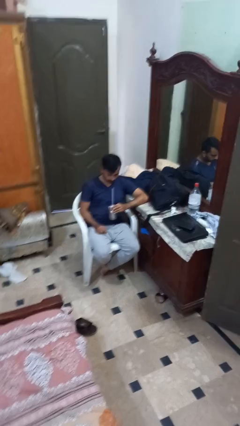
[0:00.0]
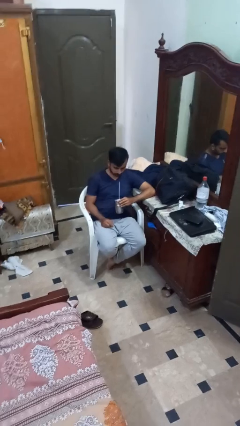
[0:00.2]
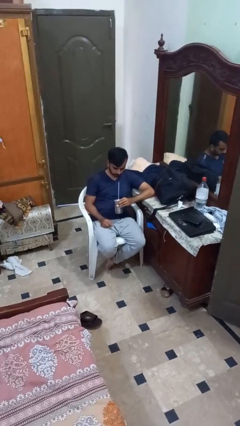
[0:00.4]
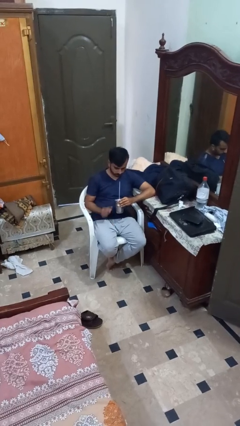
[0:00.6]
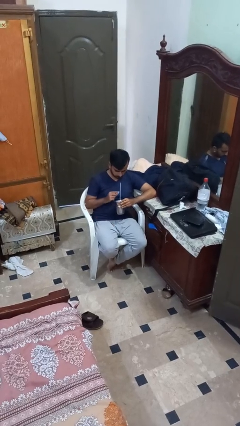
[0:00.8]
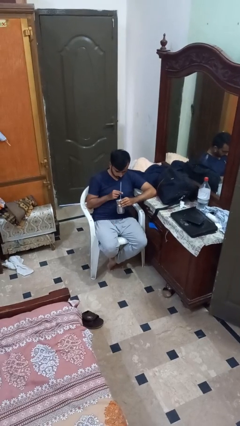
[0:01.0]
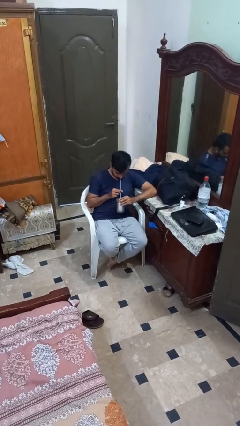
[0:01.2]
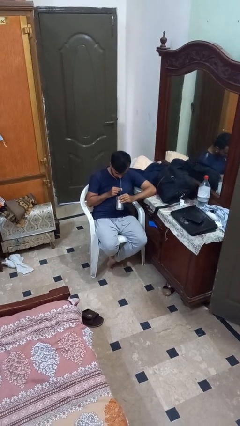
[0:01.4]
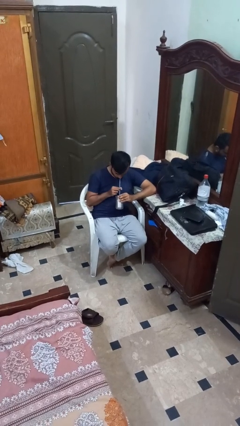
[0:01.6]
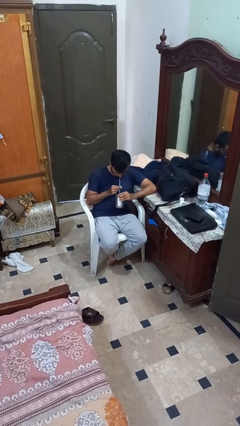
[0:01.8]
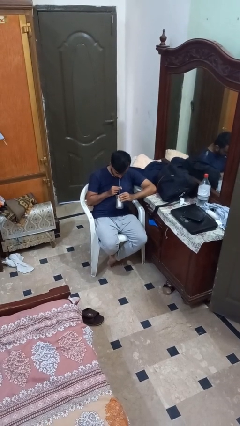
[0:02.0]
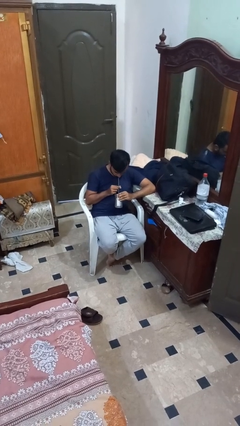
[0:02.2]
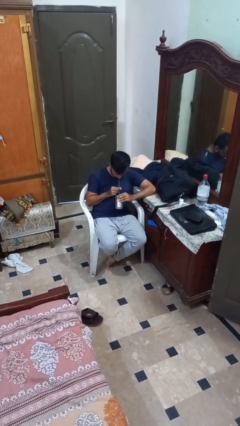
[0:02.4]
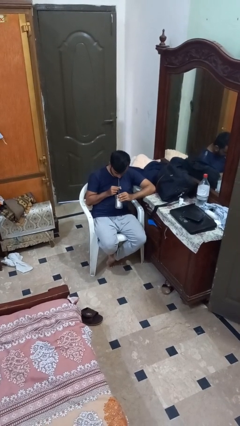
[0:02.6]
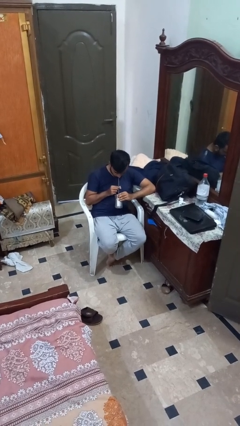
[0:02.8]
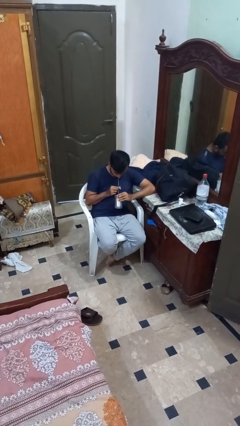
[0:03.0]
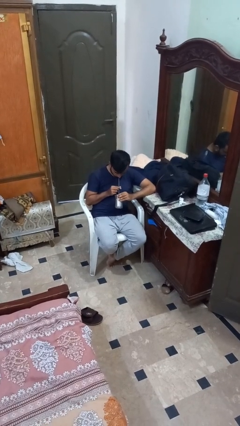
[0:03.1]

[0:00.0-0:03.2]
person drinks from straw

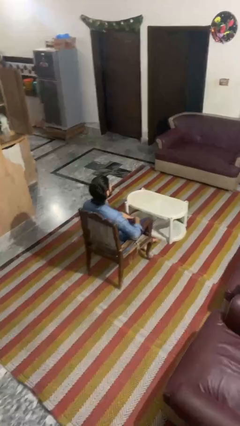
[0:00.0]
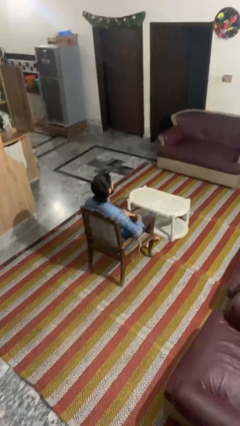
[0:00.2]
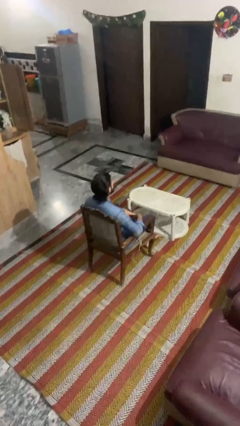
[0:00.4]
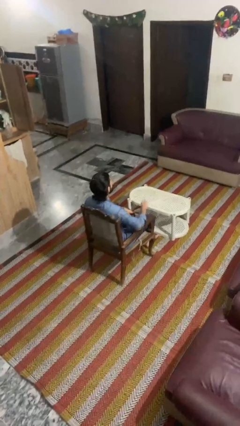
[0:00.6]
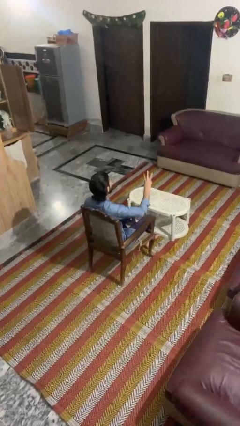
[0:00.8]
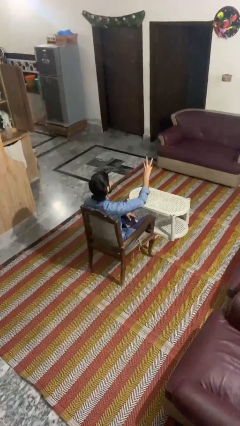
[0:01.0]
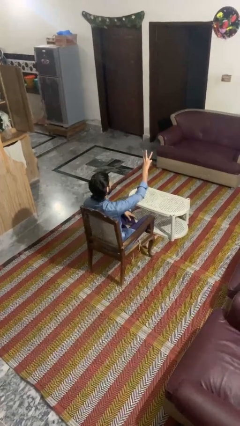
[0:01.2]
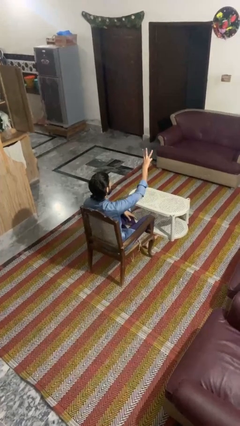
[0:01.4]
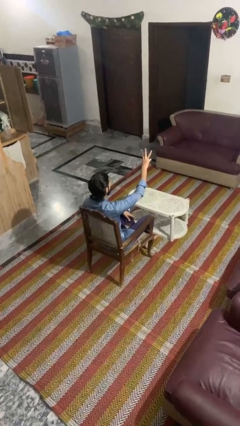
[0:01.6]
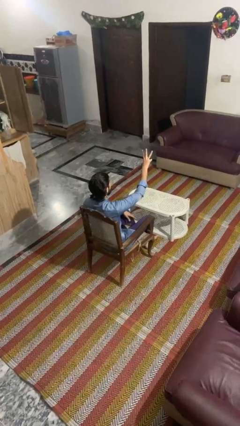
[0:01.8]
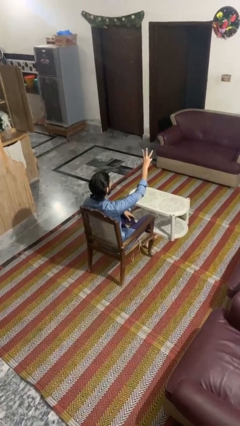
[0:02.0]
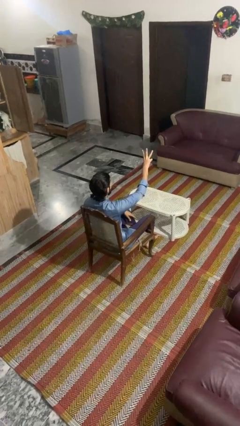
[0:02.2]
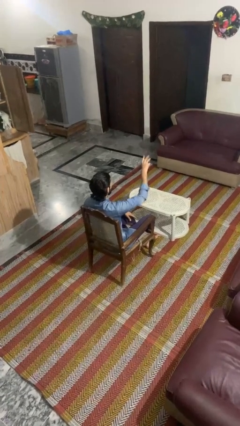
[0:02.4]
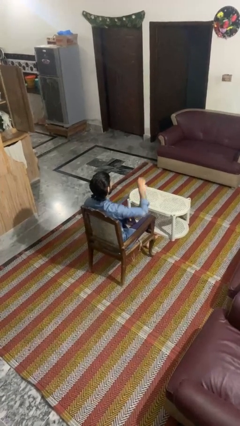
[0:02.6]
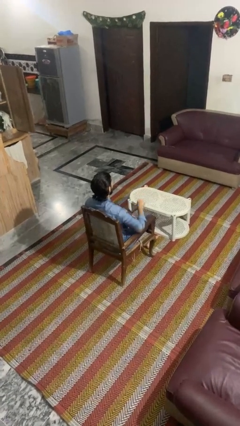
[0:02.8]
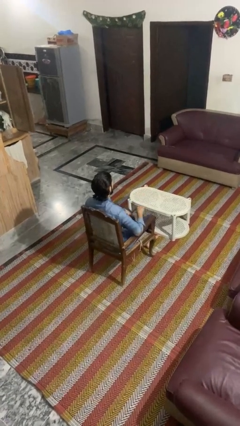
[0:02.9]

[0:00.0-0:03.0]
person gestures number three

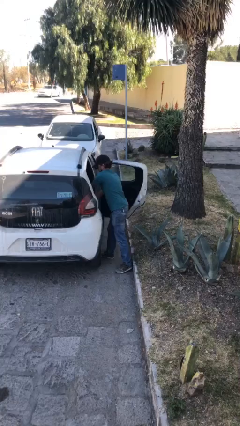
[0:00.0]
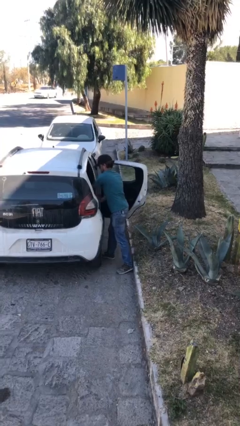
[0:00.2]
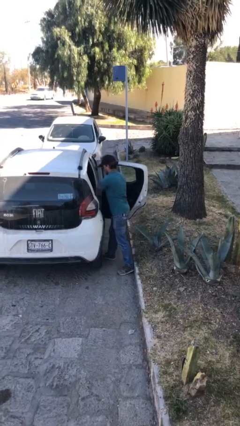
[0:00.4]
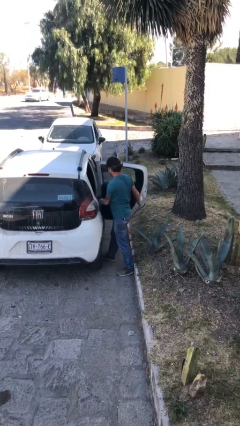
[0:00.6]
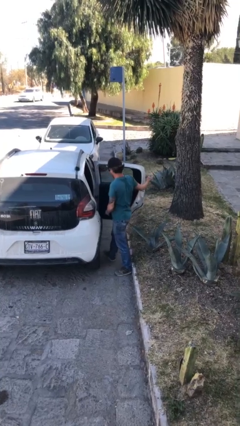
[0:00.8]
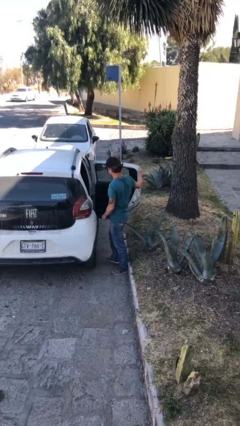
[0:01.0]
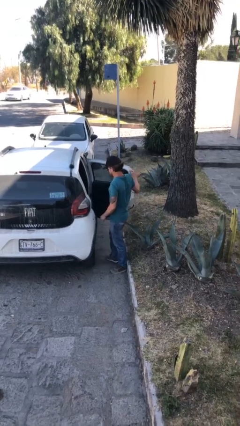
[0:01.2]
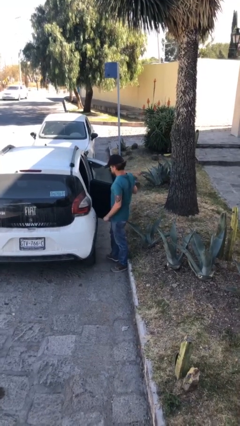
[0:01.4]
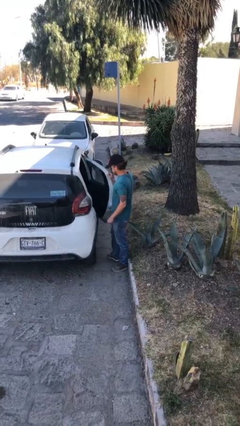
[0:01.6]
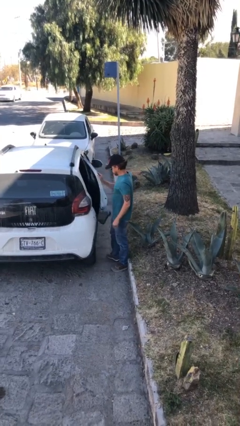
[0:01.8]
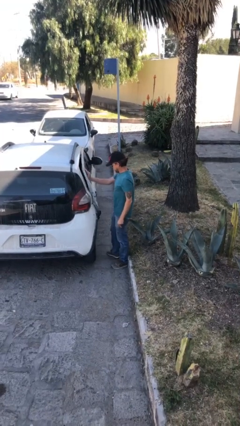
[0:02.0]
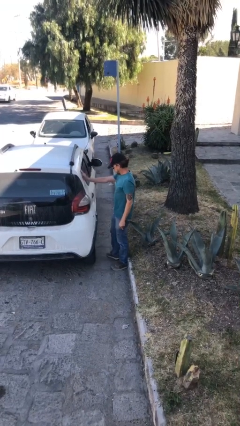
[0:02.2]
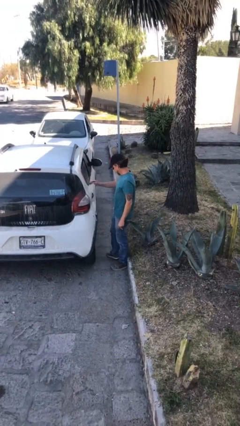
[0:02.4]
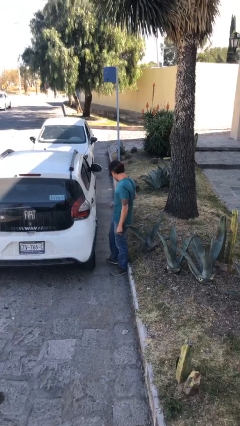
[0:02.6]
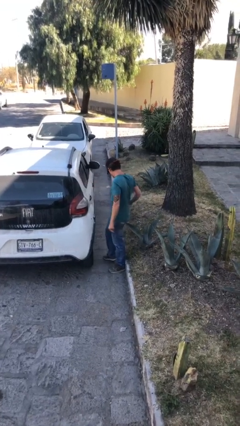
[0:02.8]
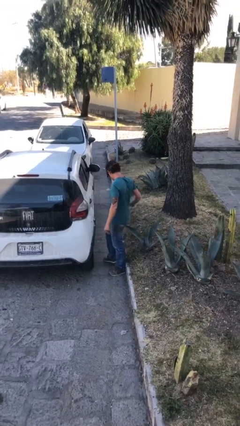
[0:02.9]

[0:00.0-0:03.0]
person closes car door

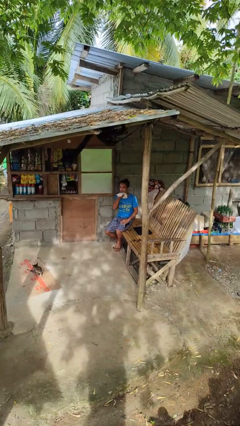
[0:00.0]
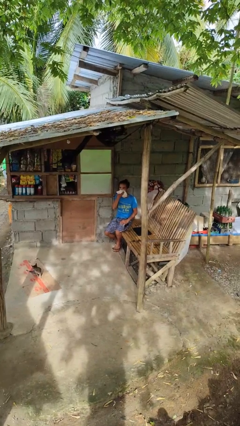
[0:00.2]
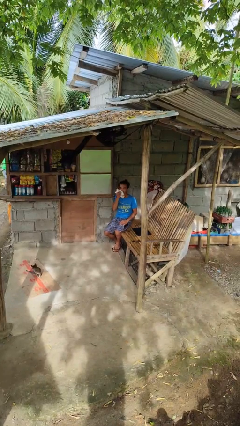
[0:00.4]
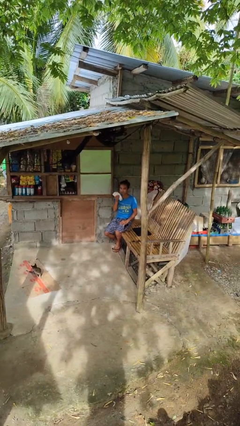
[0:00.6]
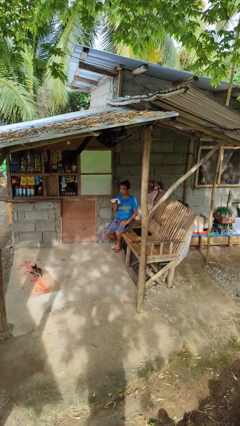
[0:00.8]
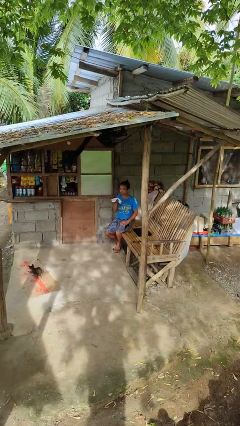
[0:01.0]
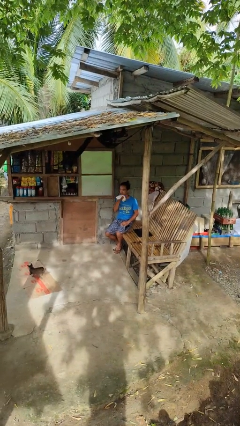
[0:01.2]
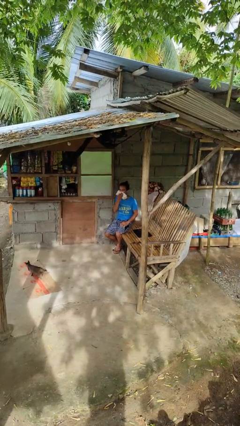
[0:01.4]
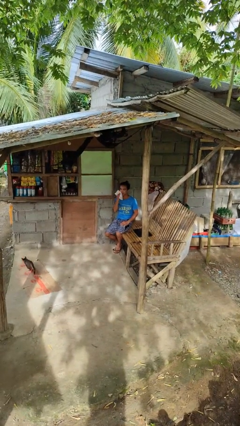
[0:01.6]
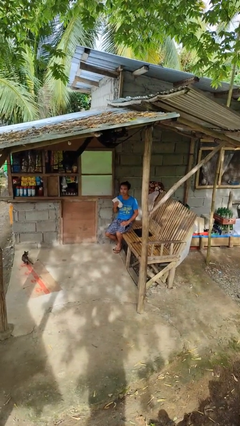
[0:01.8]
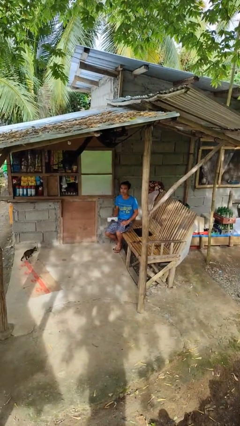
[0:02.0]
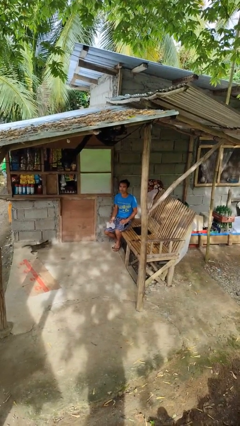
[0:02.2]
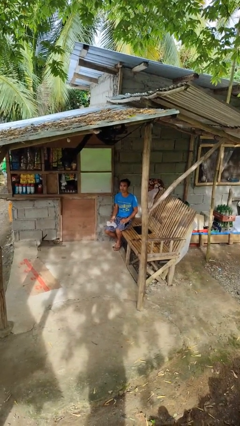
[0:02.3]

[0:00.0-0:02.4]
person wipes mouth with napkin

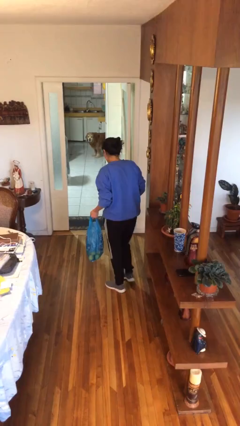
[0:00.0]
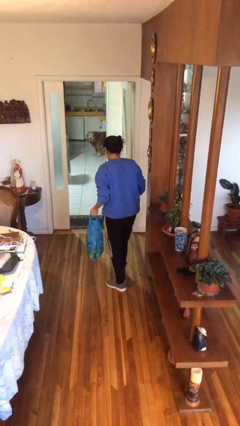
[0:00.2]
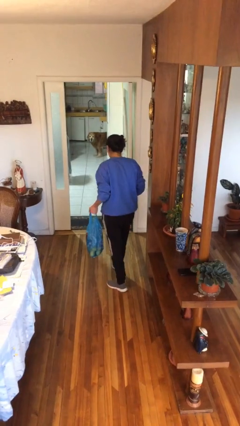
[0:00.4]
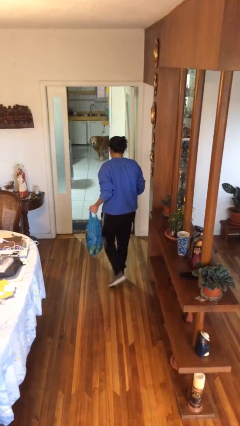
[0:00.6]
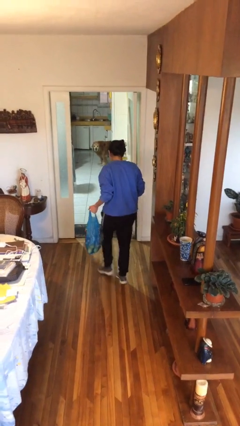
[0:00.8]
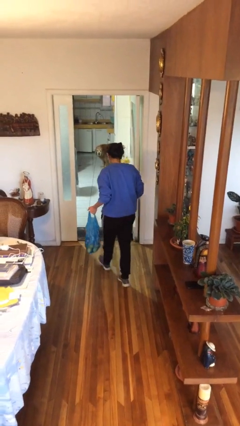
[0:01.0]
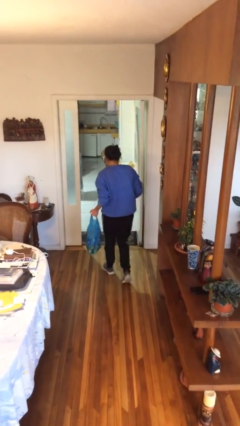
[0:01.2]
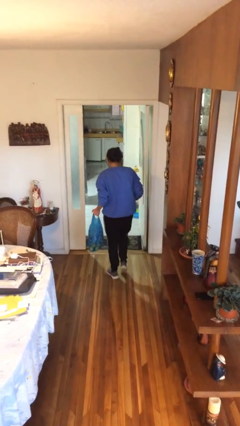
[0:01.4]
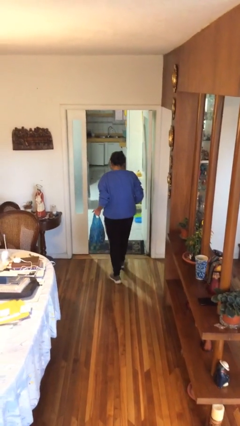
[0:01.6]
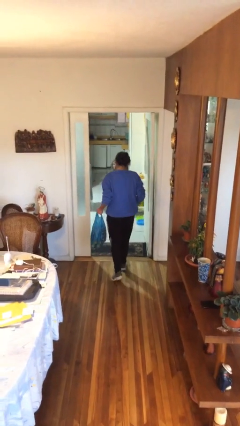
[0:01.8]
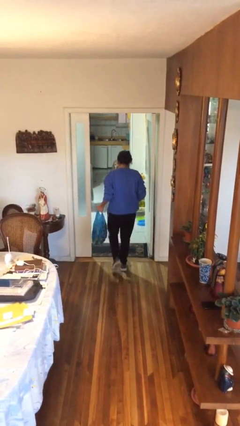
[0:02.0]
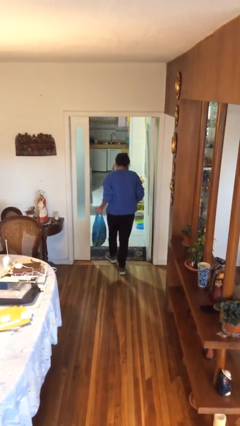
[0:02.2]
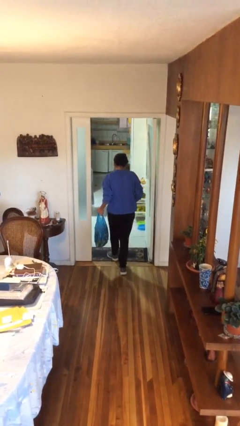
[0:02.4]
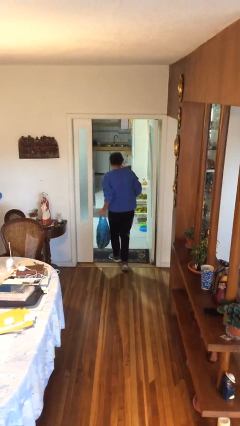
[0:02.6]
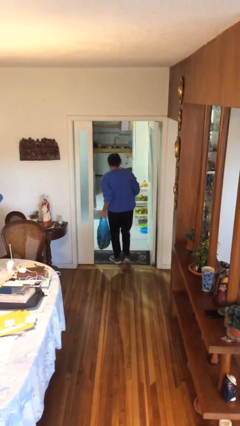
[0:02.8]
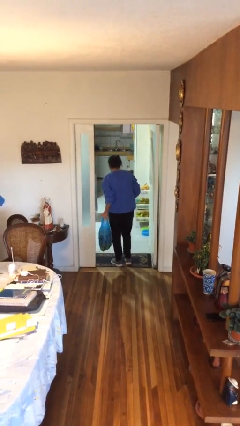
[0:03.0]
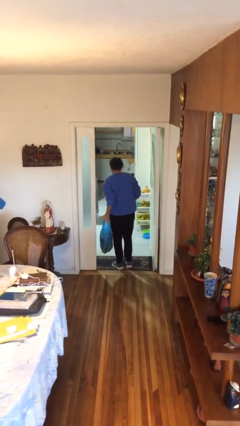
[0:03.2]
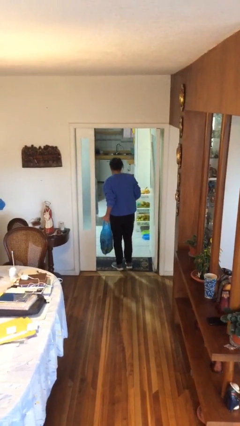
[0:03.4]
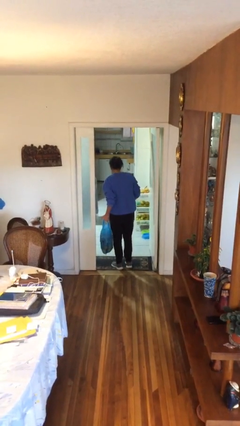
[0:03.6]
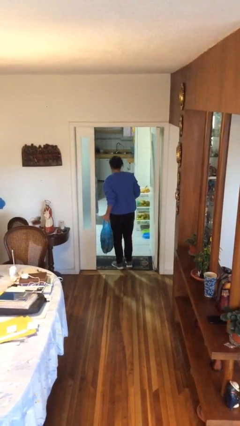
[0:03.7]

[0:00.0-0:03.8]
person carries groceries

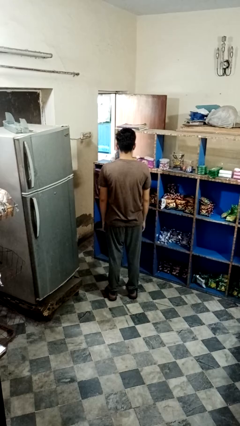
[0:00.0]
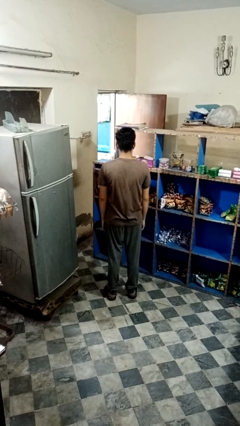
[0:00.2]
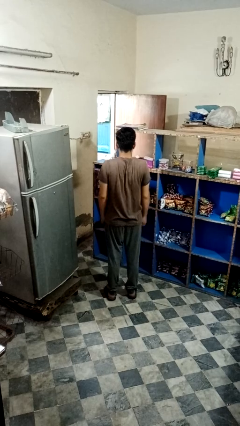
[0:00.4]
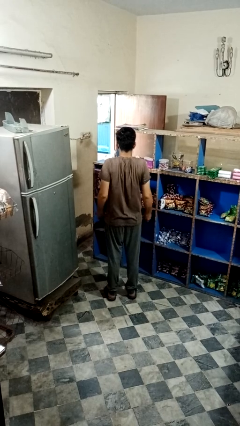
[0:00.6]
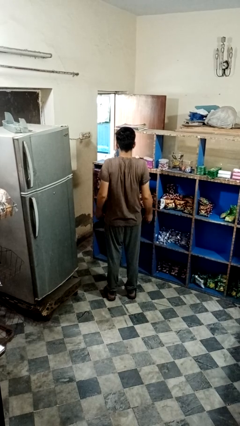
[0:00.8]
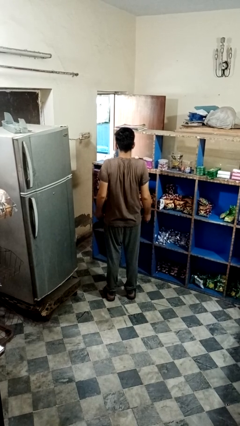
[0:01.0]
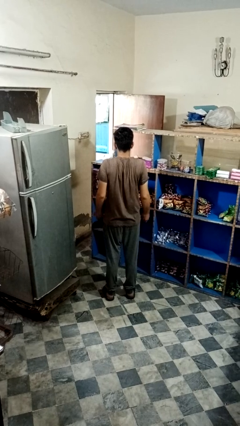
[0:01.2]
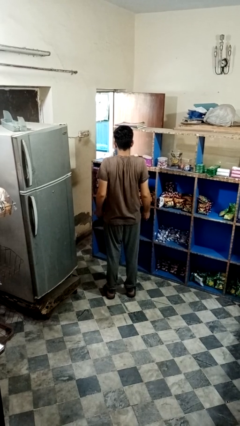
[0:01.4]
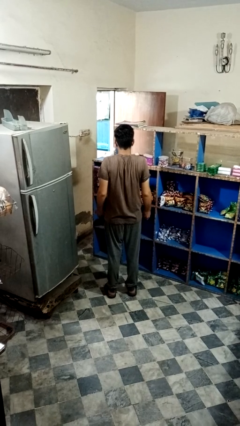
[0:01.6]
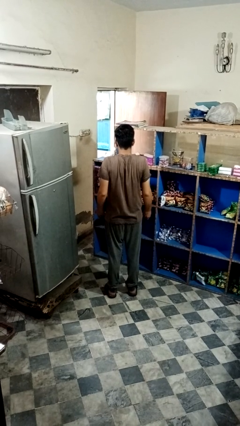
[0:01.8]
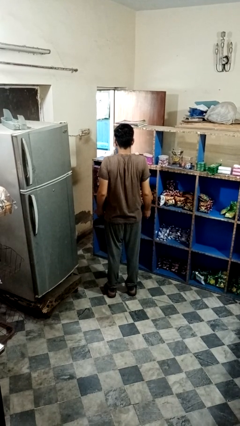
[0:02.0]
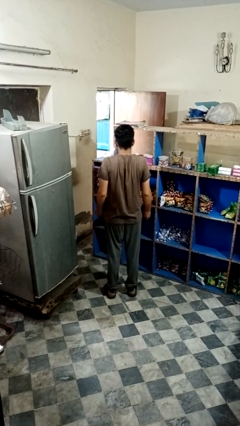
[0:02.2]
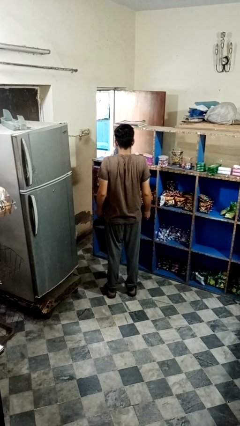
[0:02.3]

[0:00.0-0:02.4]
person shrugs
